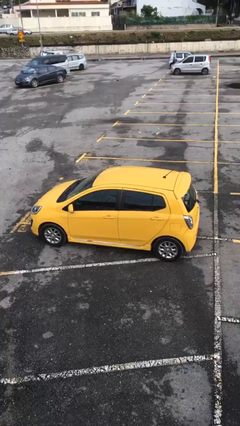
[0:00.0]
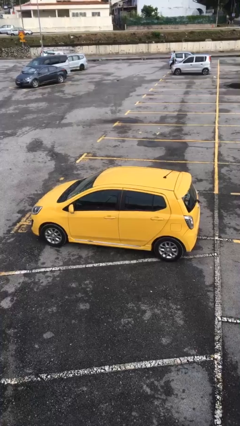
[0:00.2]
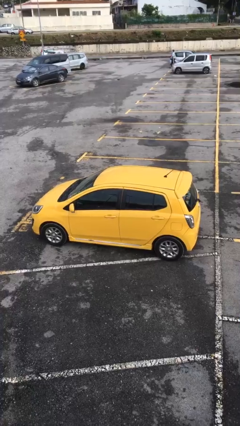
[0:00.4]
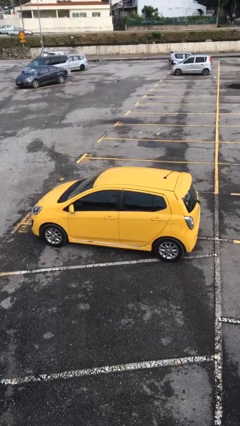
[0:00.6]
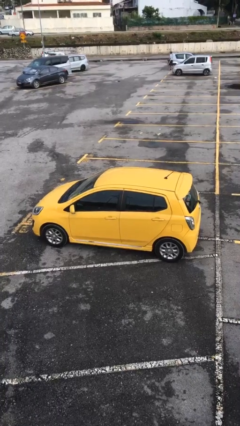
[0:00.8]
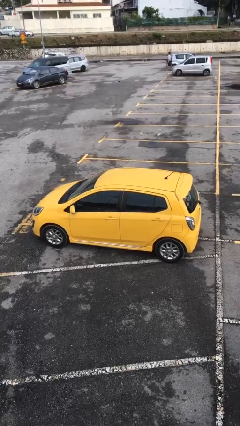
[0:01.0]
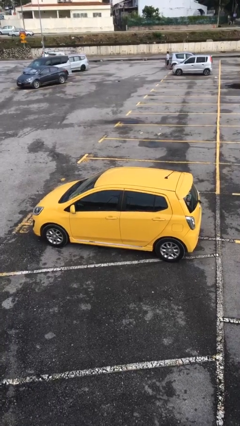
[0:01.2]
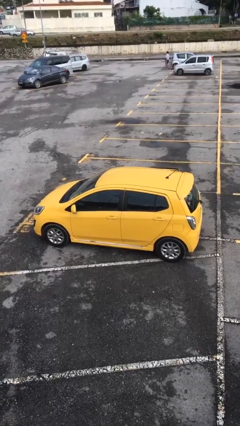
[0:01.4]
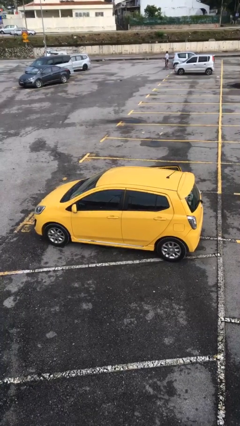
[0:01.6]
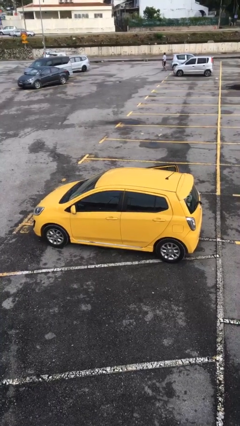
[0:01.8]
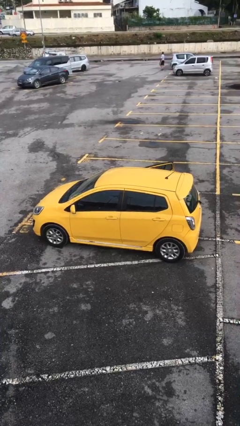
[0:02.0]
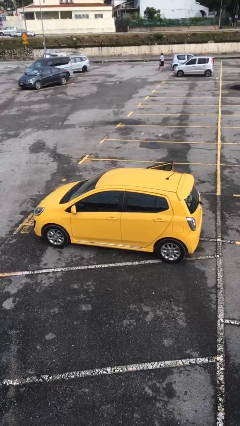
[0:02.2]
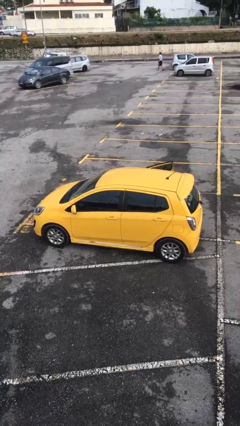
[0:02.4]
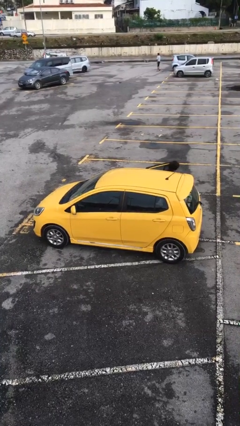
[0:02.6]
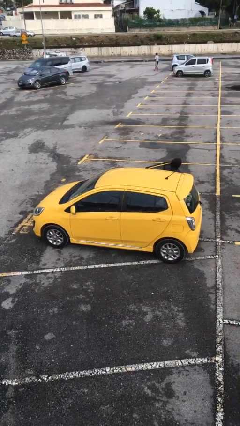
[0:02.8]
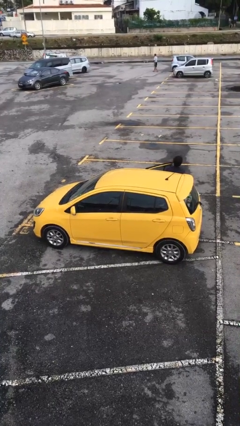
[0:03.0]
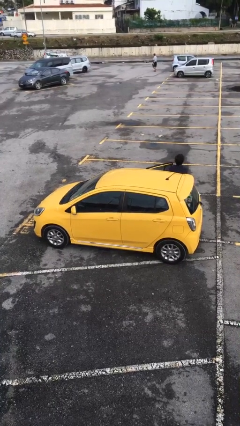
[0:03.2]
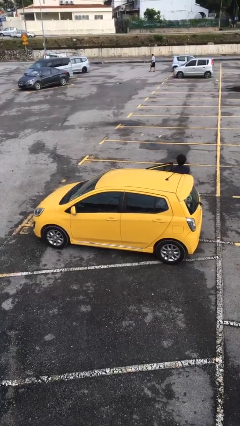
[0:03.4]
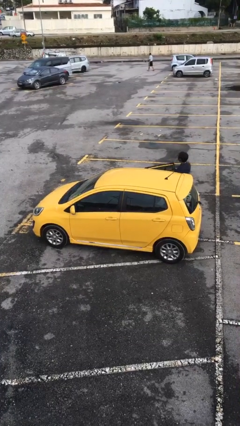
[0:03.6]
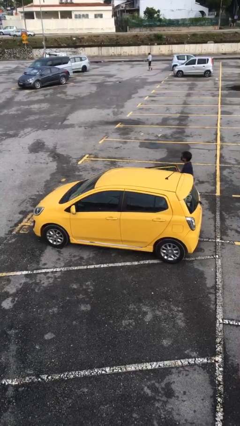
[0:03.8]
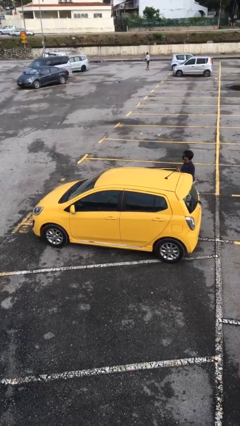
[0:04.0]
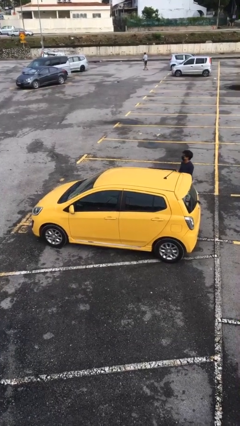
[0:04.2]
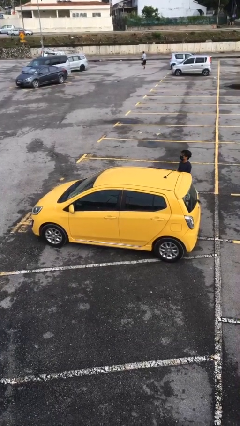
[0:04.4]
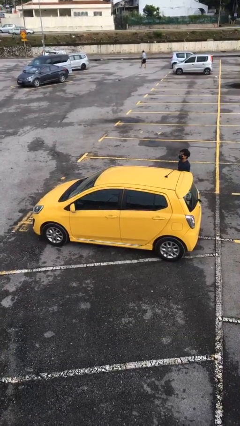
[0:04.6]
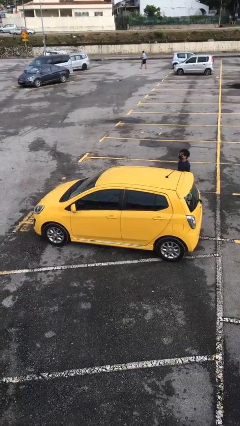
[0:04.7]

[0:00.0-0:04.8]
car drops off person

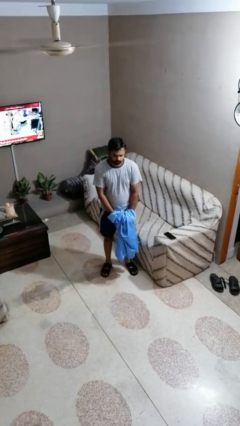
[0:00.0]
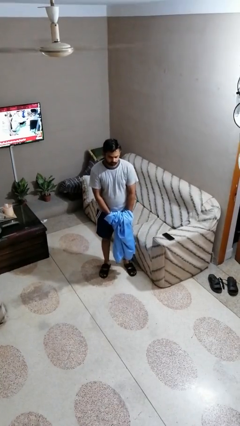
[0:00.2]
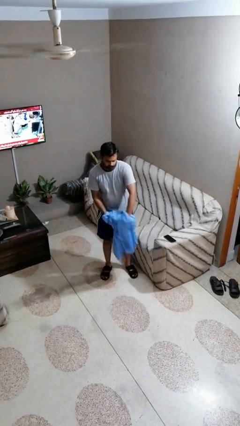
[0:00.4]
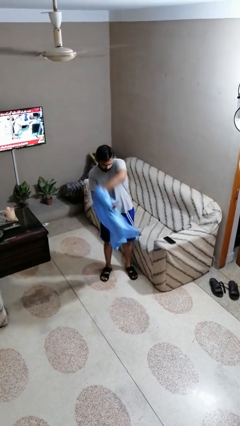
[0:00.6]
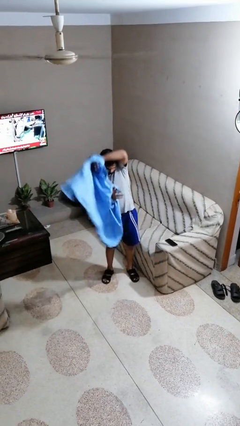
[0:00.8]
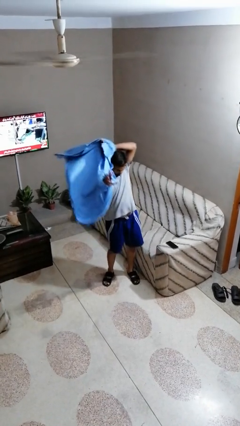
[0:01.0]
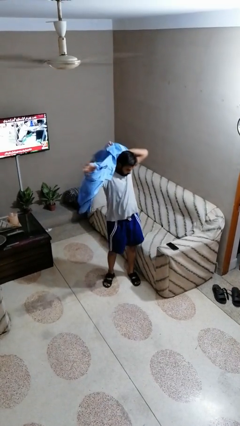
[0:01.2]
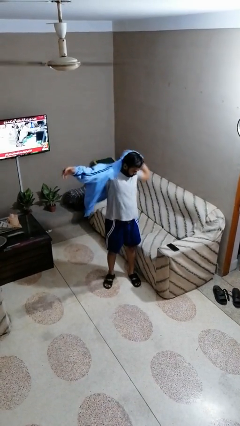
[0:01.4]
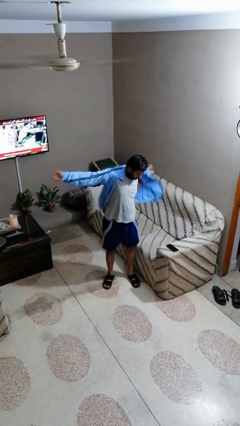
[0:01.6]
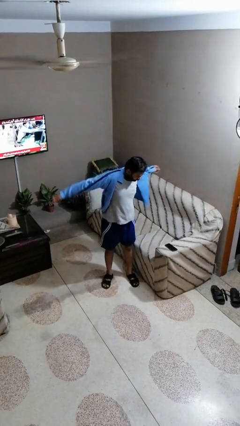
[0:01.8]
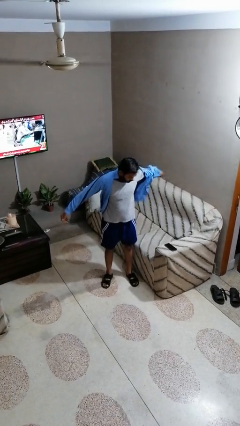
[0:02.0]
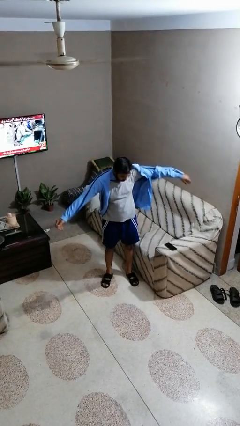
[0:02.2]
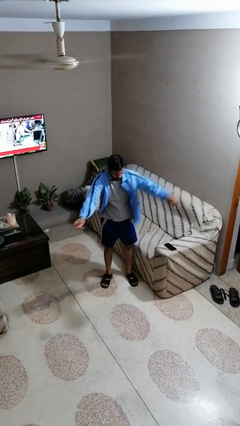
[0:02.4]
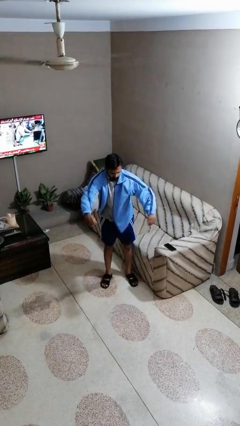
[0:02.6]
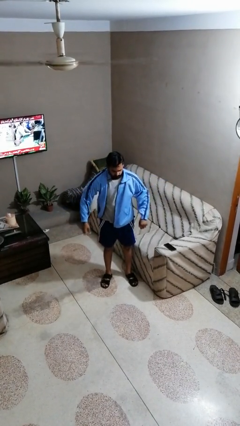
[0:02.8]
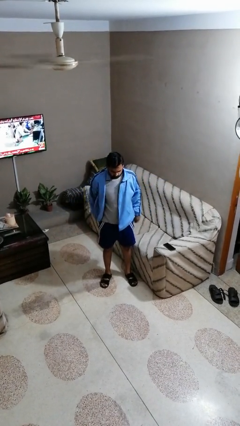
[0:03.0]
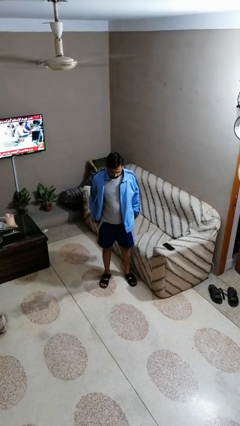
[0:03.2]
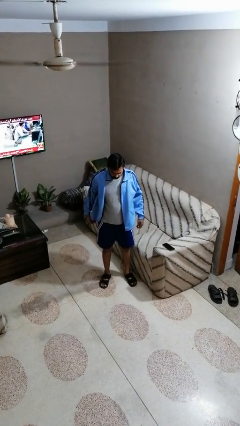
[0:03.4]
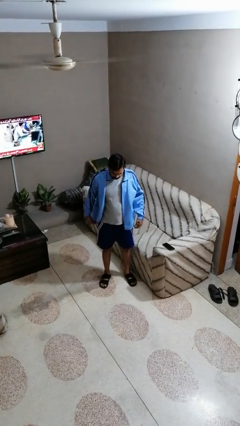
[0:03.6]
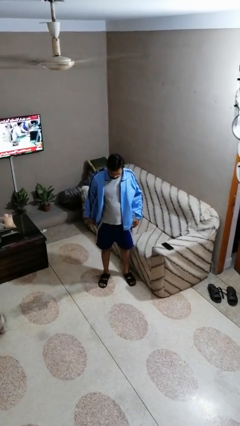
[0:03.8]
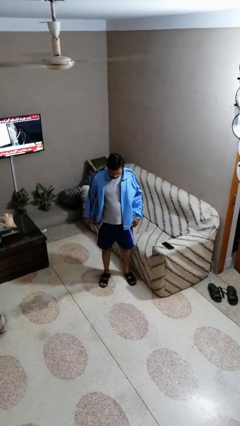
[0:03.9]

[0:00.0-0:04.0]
person puts on jacket

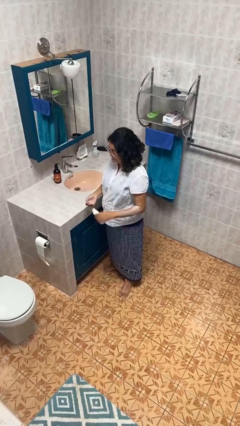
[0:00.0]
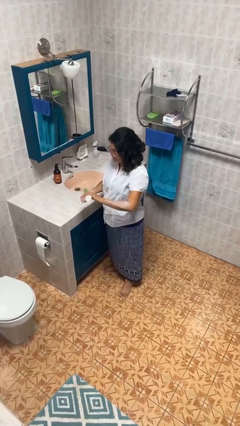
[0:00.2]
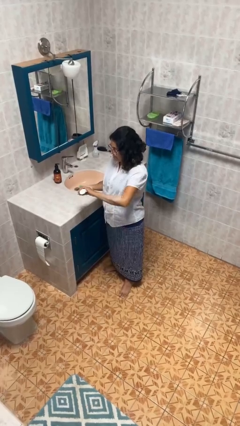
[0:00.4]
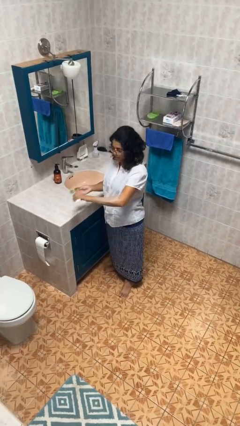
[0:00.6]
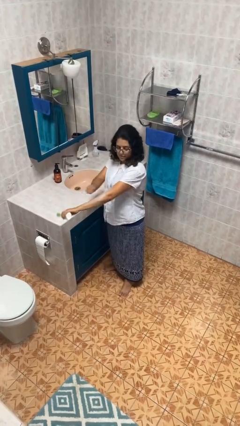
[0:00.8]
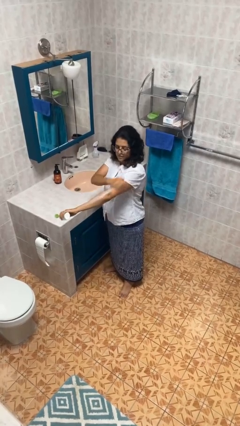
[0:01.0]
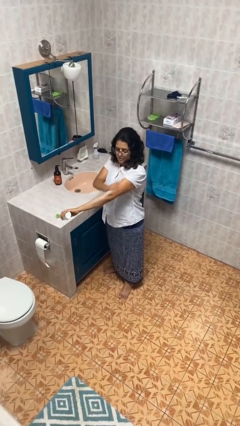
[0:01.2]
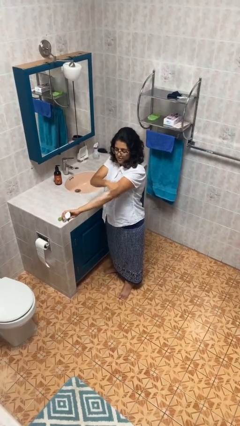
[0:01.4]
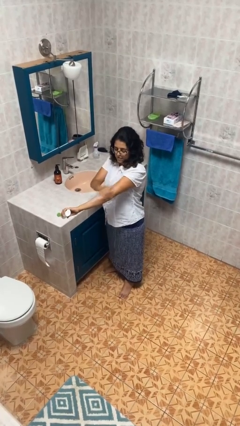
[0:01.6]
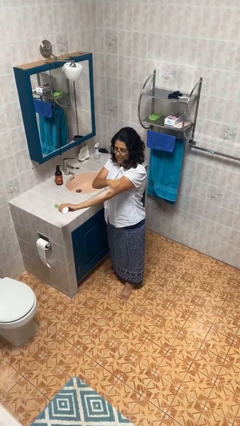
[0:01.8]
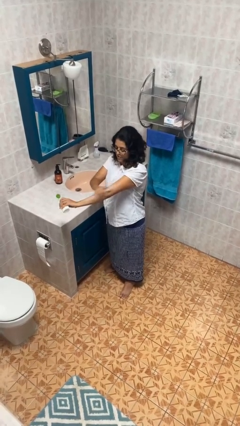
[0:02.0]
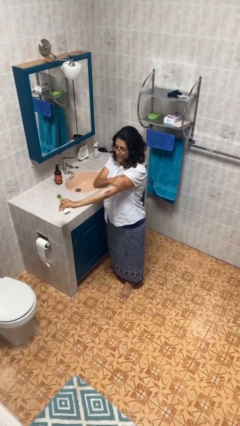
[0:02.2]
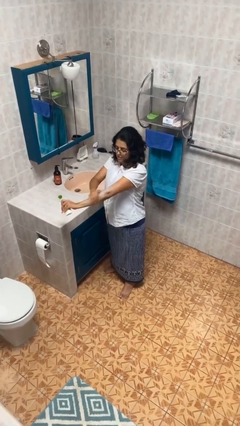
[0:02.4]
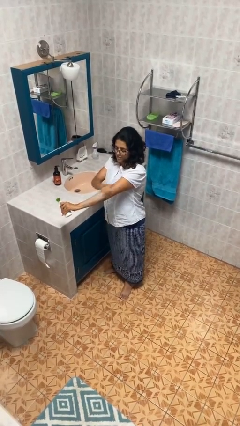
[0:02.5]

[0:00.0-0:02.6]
person applies sunscreen

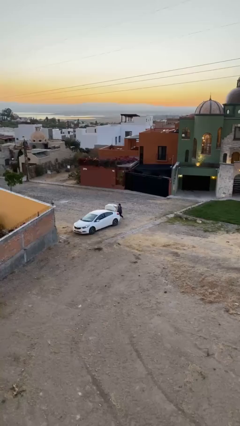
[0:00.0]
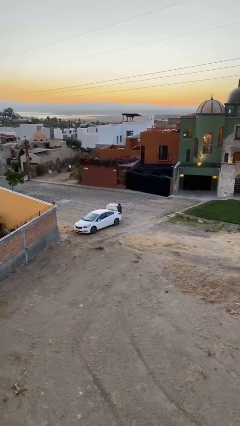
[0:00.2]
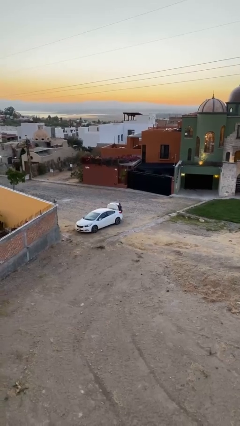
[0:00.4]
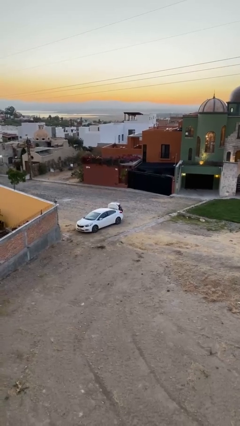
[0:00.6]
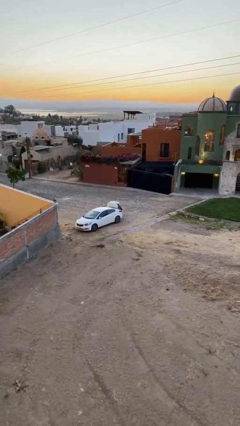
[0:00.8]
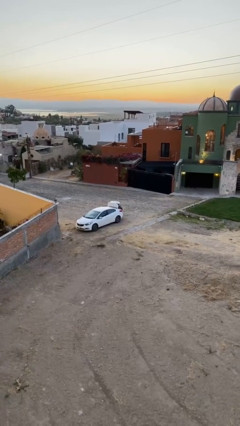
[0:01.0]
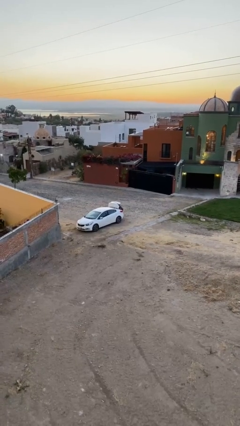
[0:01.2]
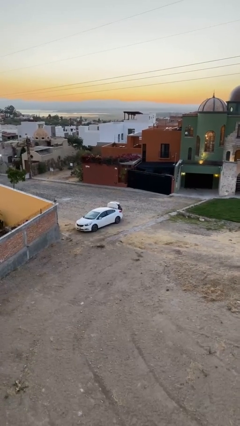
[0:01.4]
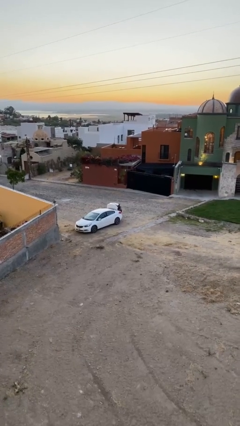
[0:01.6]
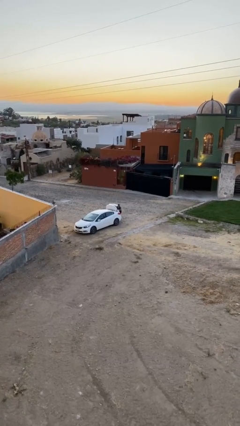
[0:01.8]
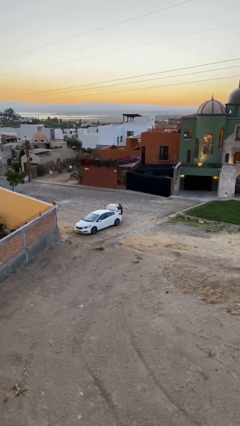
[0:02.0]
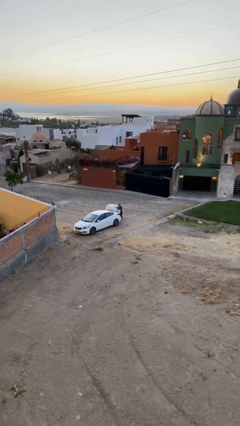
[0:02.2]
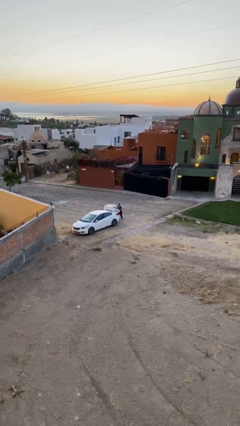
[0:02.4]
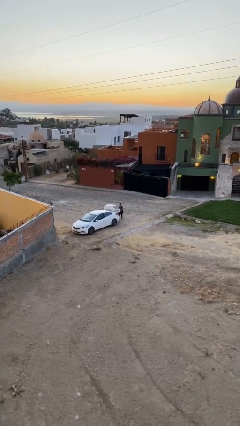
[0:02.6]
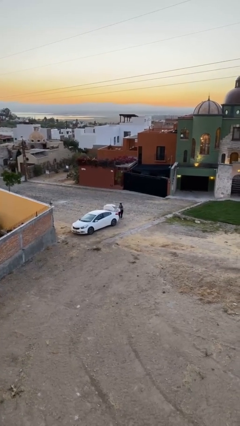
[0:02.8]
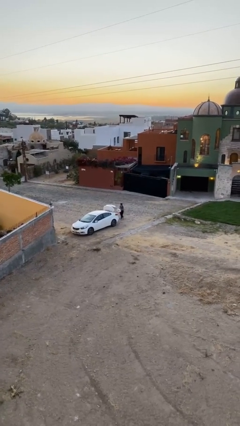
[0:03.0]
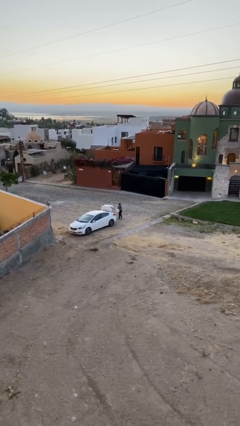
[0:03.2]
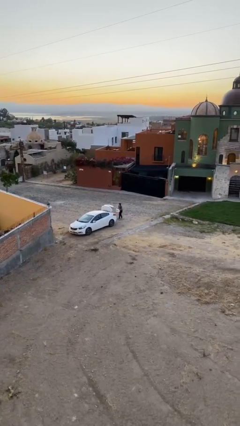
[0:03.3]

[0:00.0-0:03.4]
person unloads car

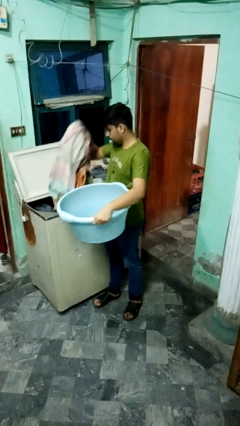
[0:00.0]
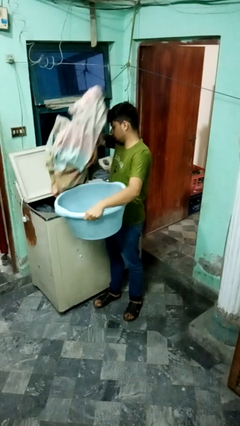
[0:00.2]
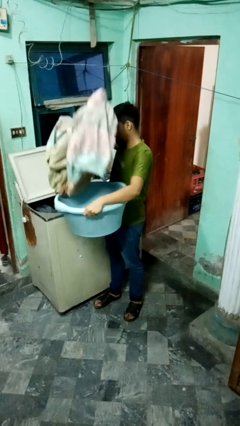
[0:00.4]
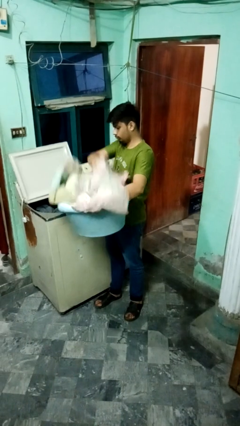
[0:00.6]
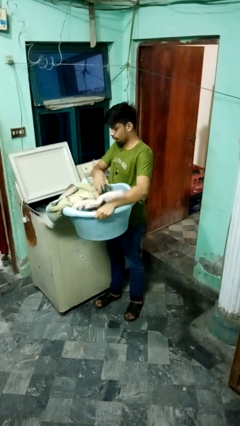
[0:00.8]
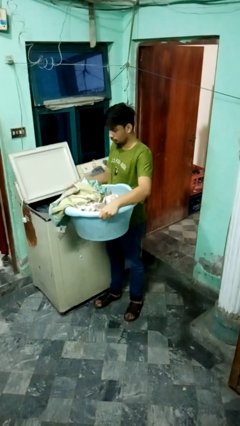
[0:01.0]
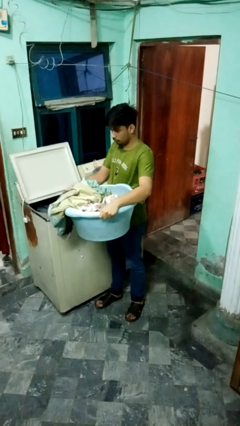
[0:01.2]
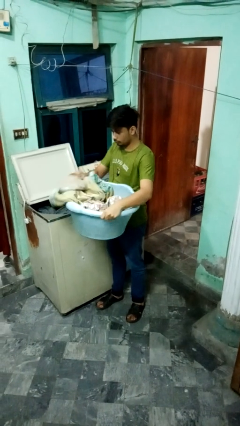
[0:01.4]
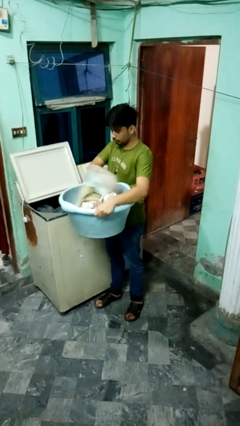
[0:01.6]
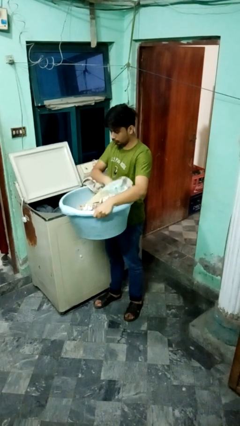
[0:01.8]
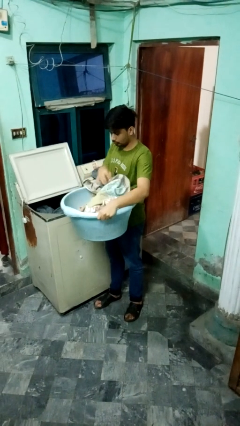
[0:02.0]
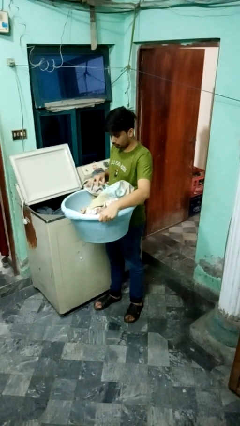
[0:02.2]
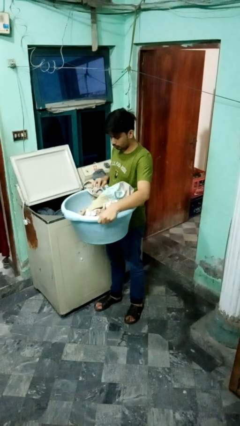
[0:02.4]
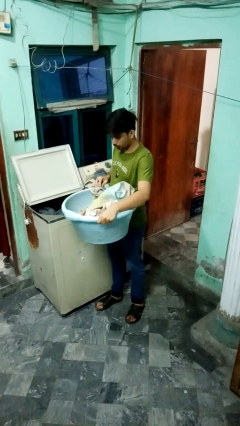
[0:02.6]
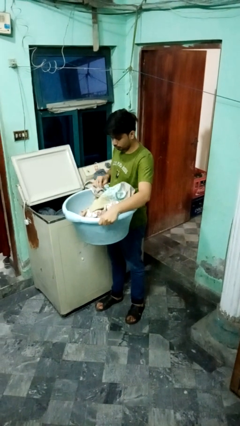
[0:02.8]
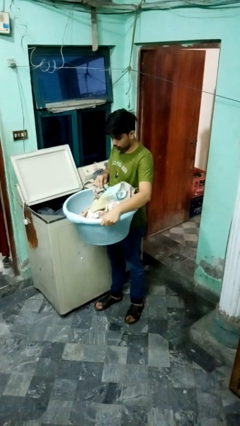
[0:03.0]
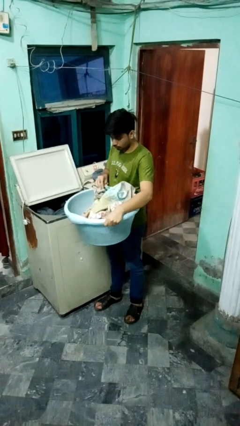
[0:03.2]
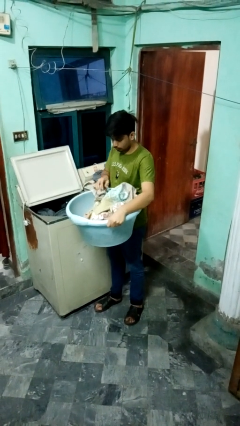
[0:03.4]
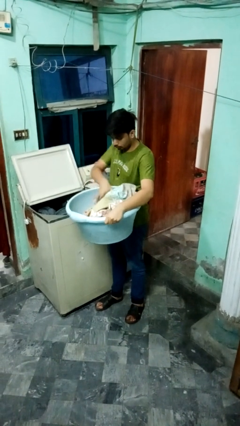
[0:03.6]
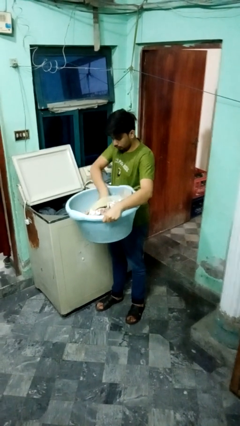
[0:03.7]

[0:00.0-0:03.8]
person unloads clotheswasher
